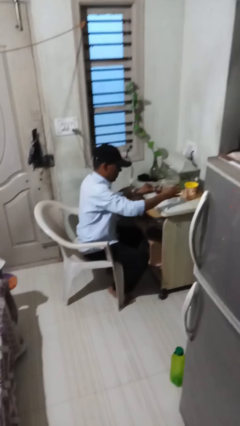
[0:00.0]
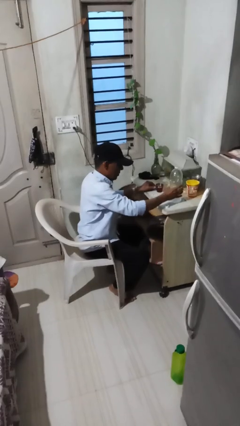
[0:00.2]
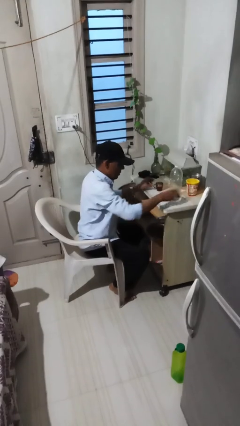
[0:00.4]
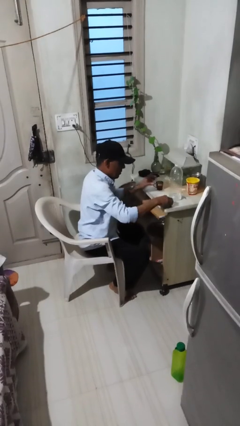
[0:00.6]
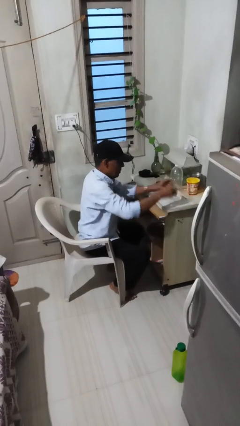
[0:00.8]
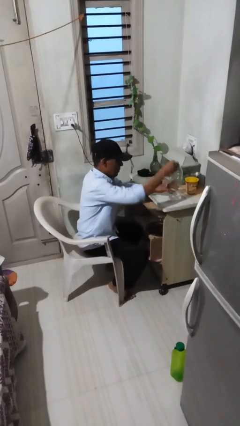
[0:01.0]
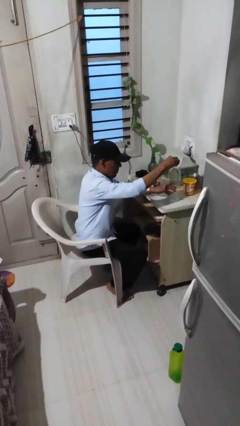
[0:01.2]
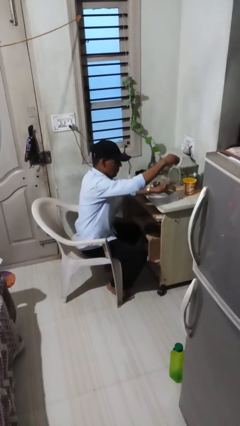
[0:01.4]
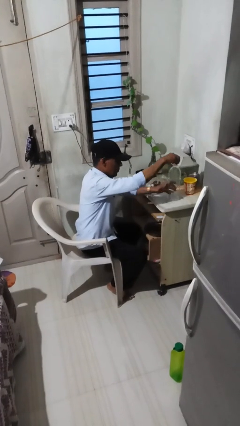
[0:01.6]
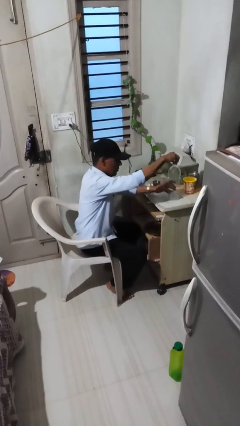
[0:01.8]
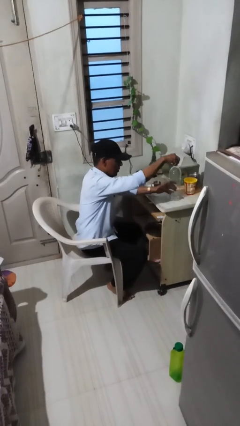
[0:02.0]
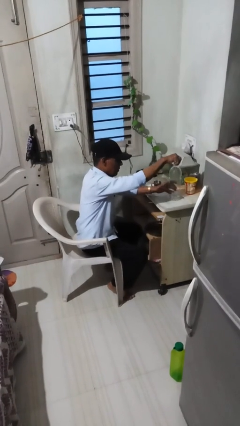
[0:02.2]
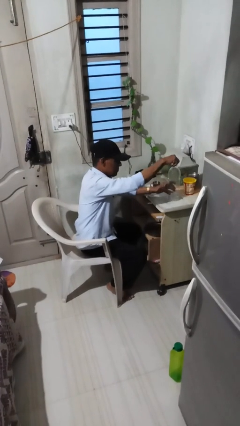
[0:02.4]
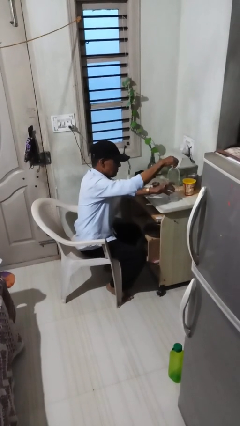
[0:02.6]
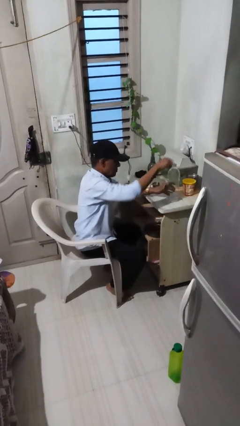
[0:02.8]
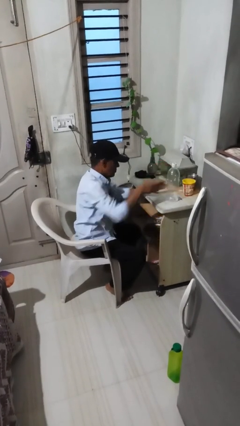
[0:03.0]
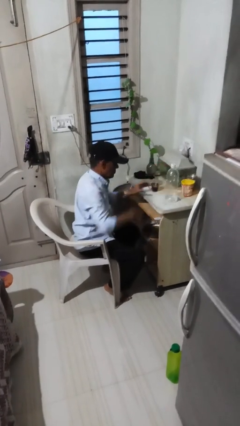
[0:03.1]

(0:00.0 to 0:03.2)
person screws lid to bottle

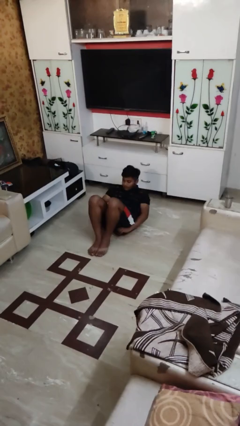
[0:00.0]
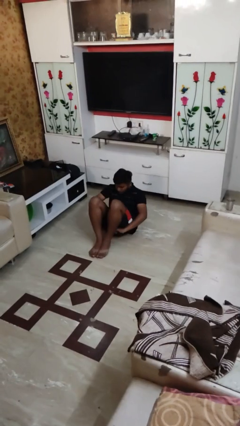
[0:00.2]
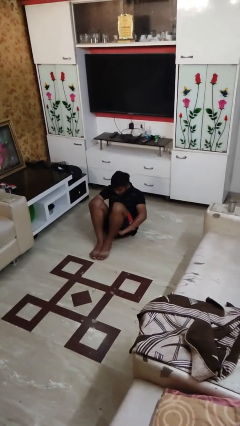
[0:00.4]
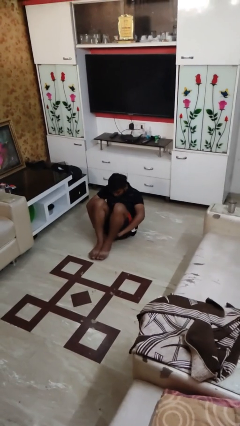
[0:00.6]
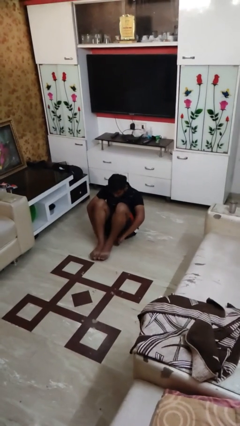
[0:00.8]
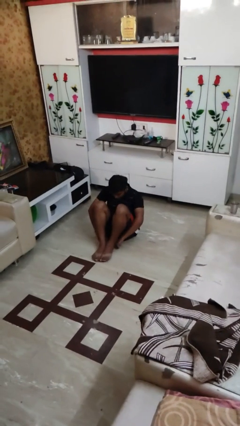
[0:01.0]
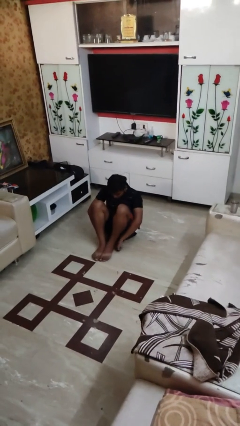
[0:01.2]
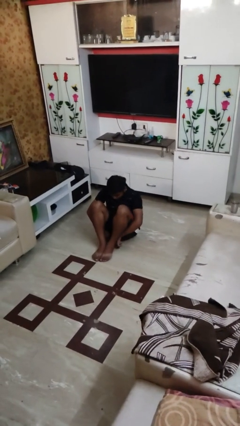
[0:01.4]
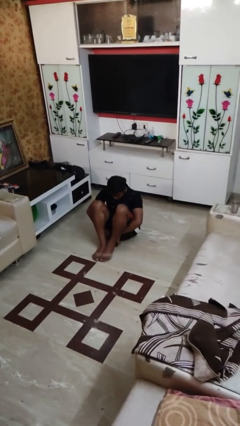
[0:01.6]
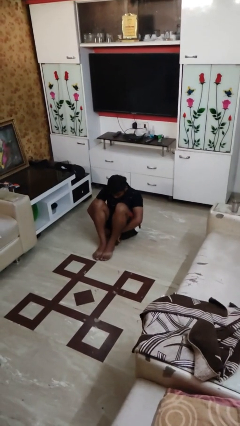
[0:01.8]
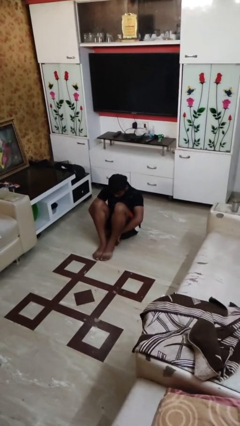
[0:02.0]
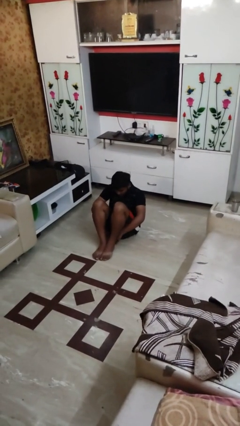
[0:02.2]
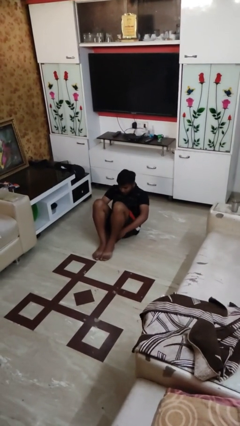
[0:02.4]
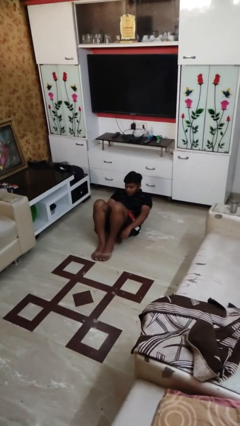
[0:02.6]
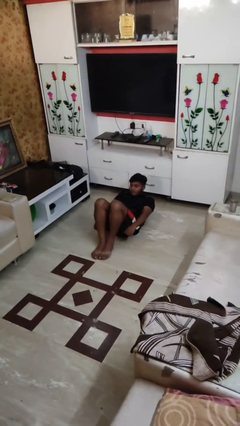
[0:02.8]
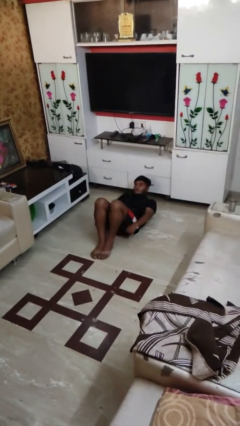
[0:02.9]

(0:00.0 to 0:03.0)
person exercises with situp

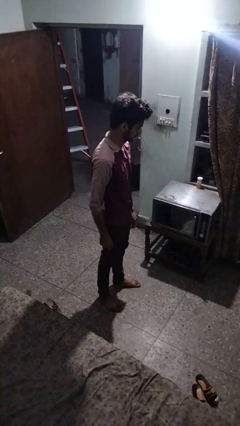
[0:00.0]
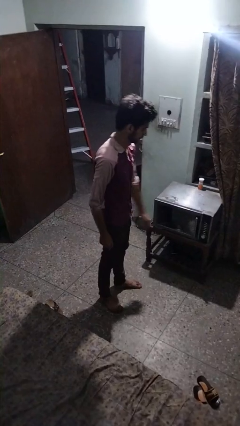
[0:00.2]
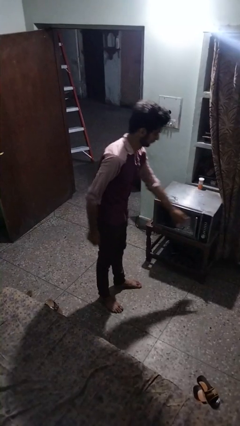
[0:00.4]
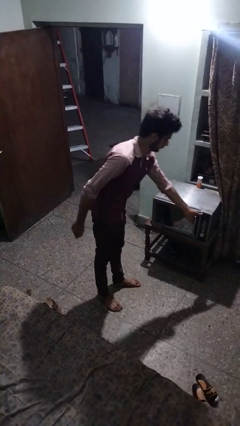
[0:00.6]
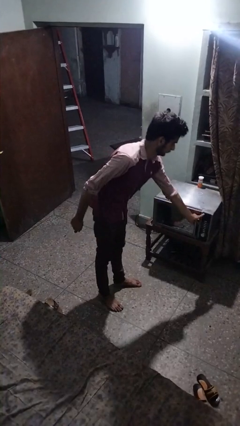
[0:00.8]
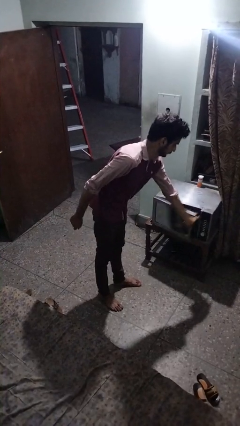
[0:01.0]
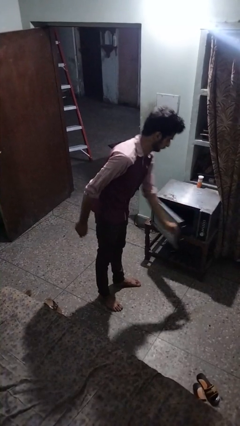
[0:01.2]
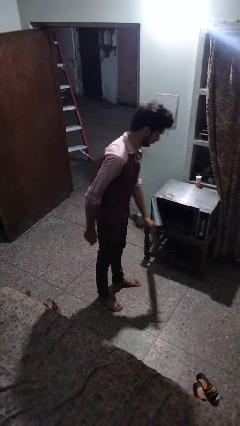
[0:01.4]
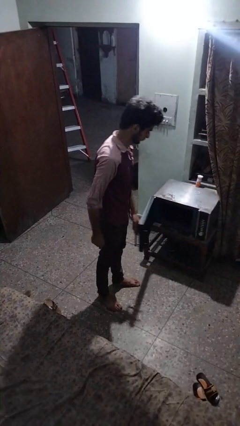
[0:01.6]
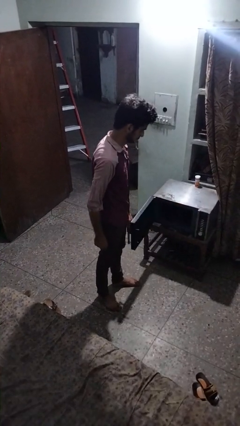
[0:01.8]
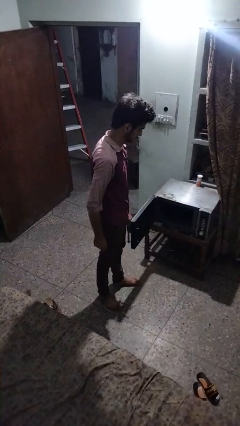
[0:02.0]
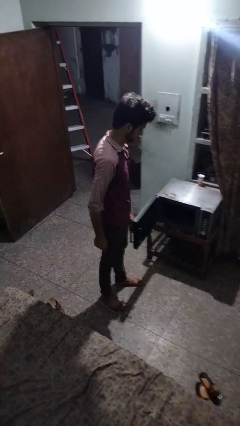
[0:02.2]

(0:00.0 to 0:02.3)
person opens microwave

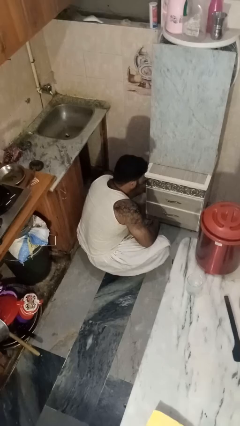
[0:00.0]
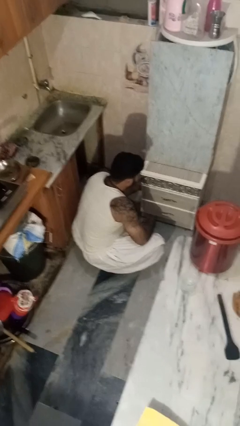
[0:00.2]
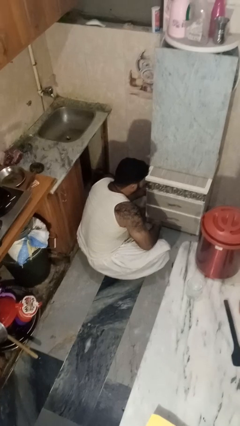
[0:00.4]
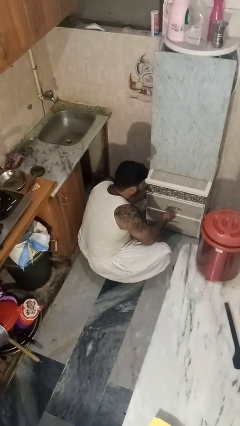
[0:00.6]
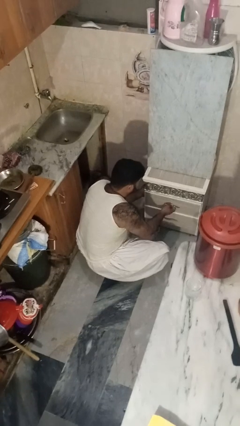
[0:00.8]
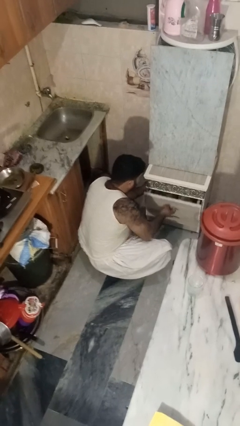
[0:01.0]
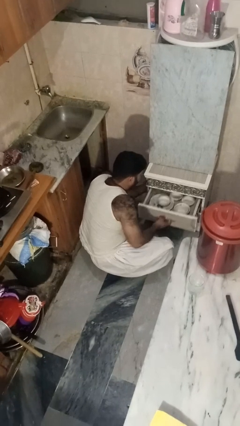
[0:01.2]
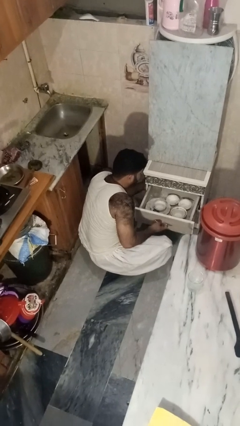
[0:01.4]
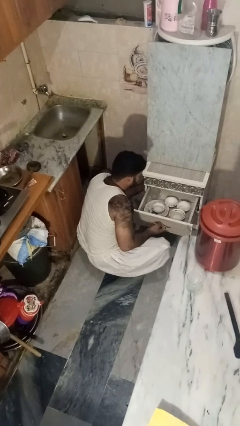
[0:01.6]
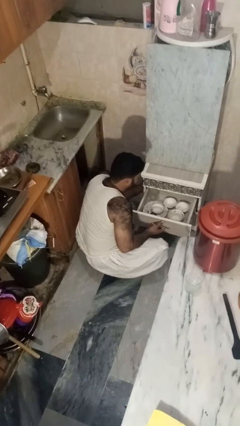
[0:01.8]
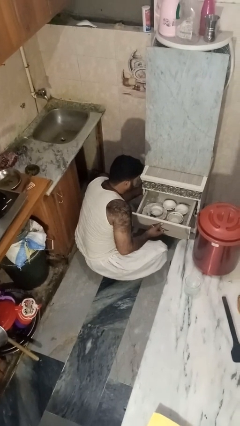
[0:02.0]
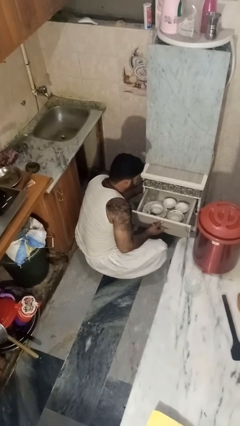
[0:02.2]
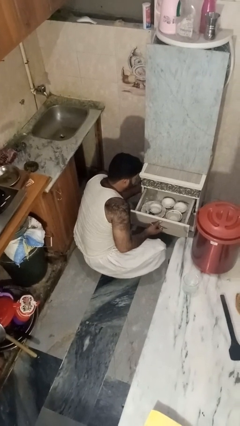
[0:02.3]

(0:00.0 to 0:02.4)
person opens kitchen drawer

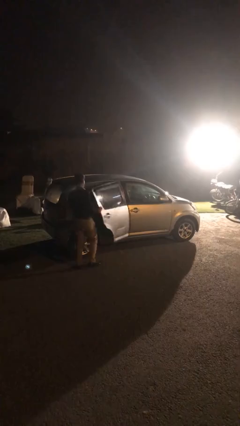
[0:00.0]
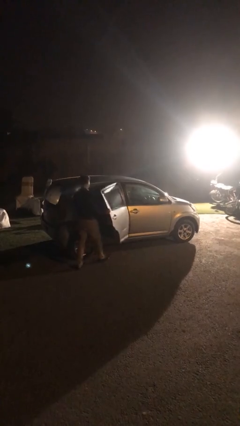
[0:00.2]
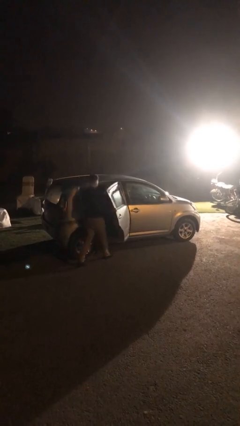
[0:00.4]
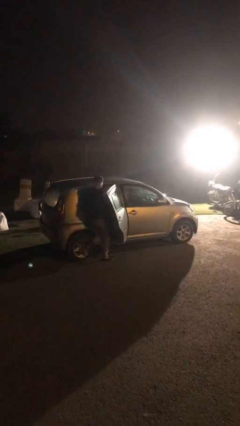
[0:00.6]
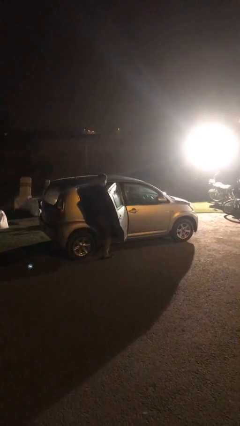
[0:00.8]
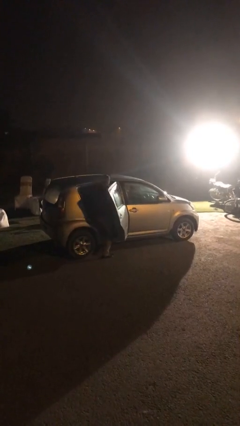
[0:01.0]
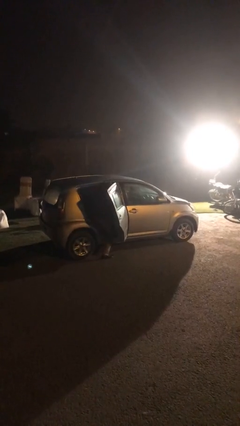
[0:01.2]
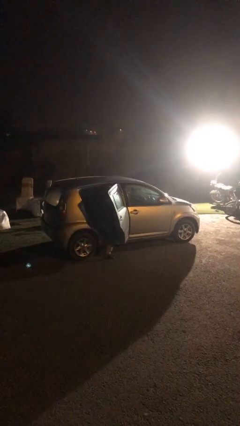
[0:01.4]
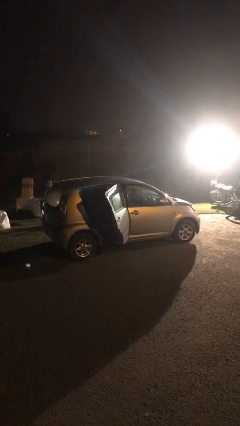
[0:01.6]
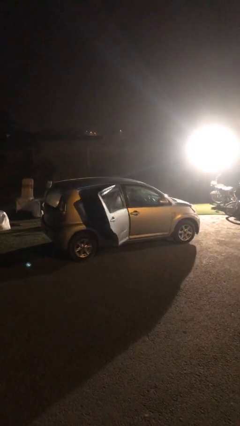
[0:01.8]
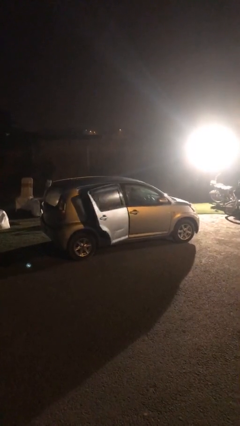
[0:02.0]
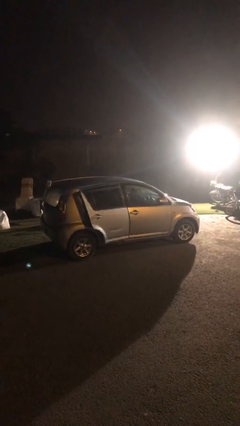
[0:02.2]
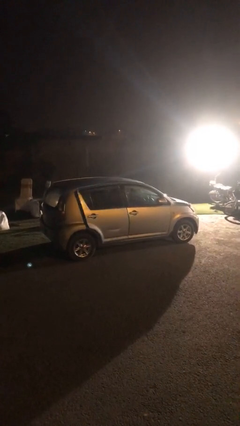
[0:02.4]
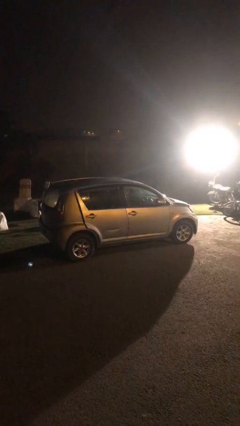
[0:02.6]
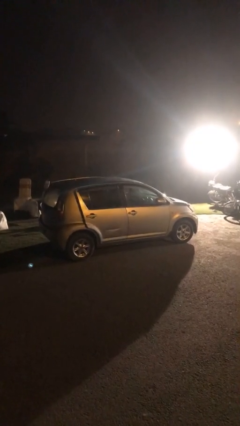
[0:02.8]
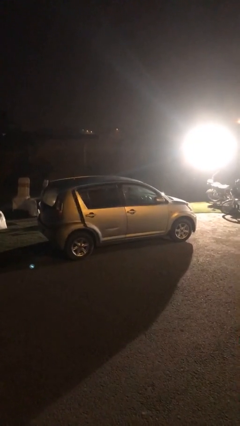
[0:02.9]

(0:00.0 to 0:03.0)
car picks up person

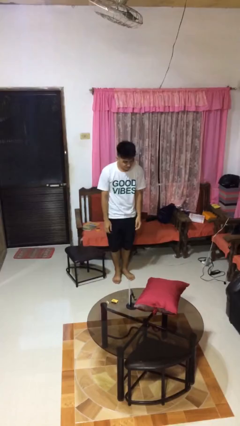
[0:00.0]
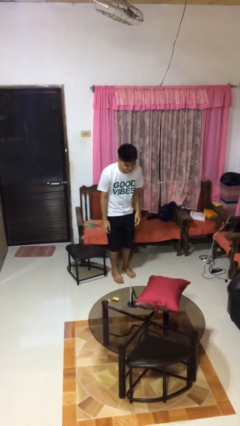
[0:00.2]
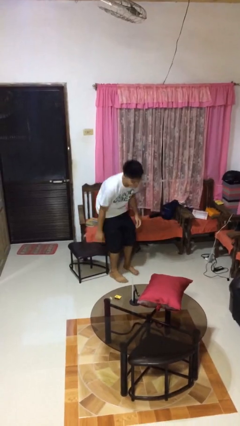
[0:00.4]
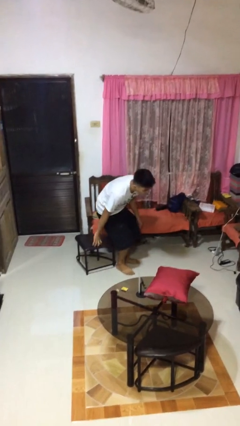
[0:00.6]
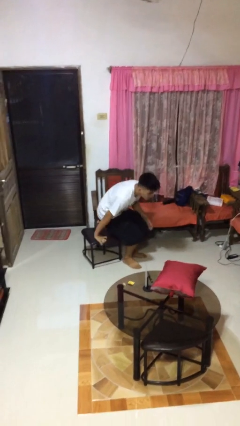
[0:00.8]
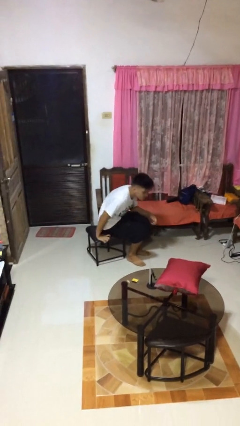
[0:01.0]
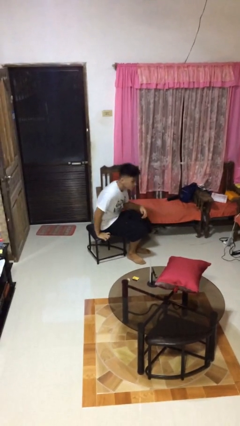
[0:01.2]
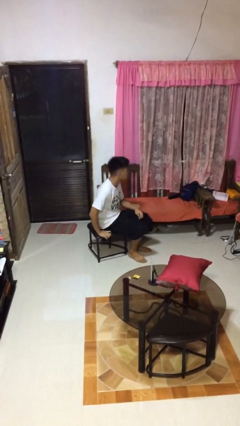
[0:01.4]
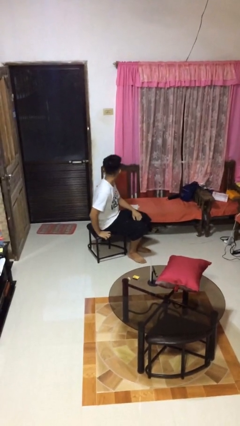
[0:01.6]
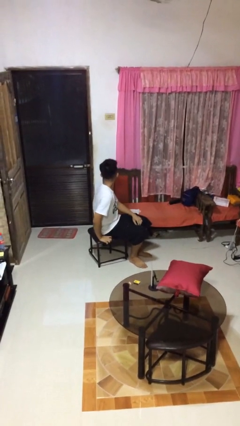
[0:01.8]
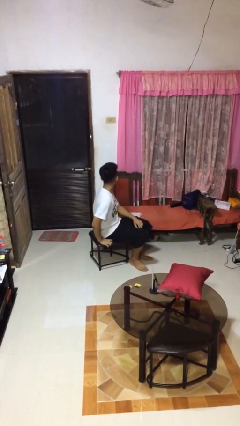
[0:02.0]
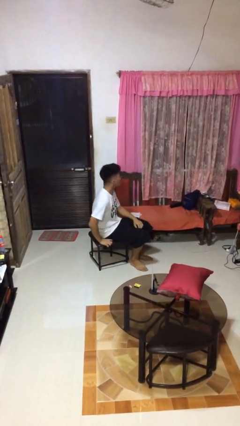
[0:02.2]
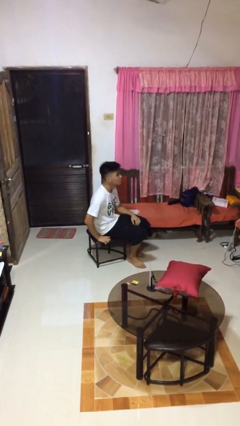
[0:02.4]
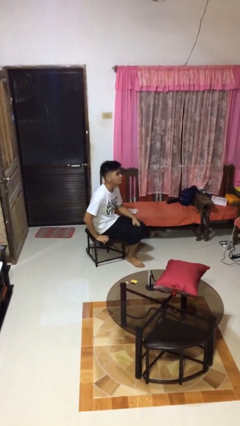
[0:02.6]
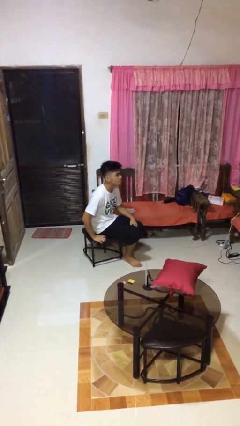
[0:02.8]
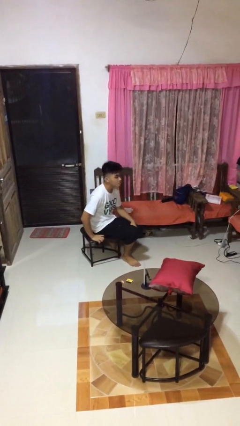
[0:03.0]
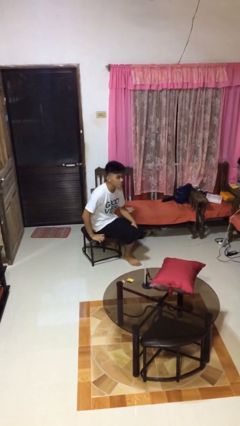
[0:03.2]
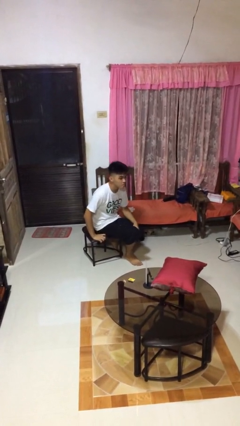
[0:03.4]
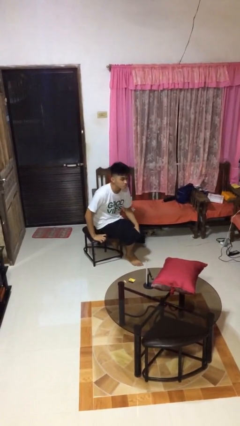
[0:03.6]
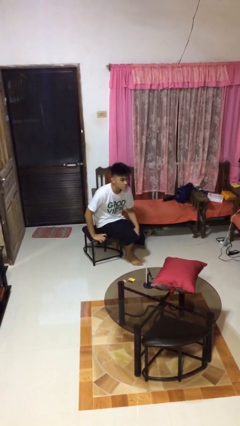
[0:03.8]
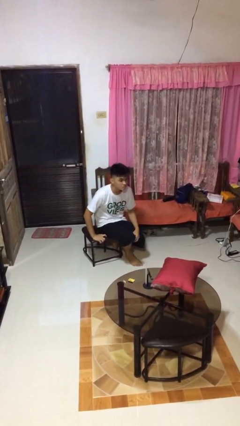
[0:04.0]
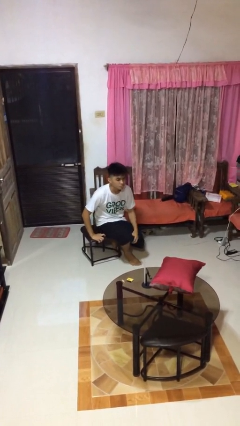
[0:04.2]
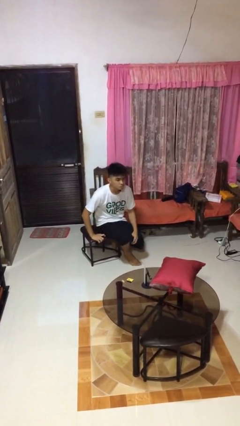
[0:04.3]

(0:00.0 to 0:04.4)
person sits down
